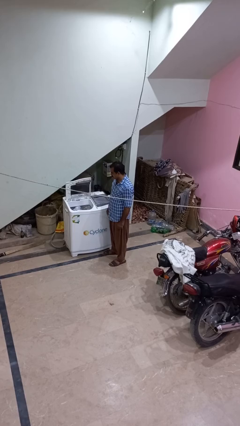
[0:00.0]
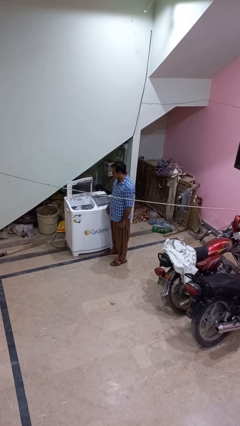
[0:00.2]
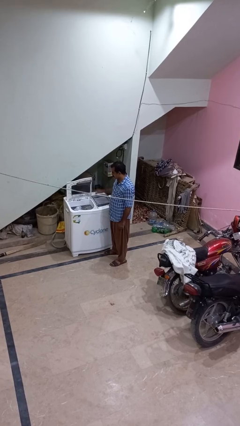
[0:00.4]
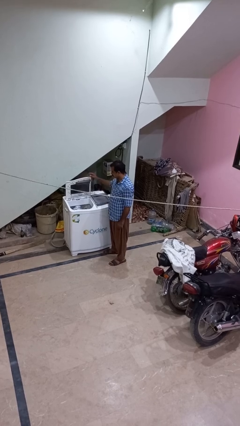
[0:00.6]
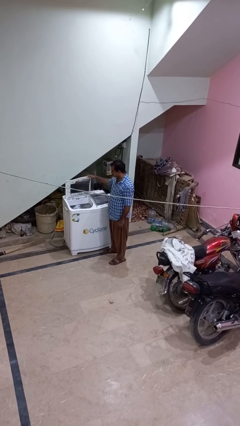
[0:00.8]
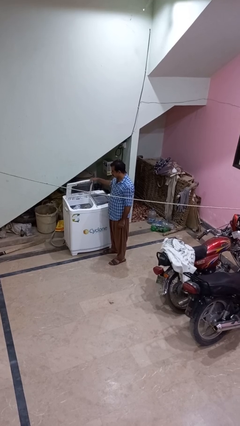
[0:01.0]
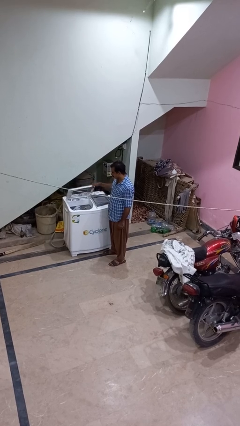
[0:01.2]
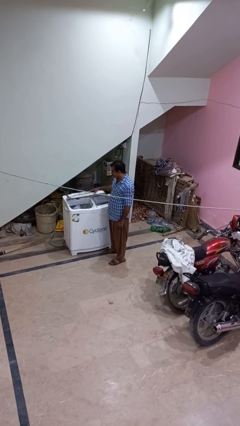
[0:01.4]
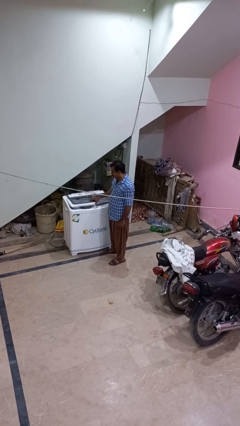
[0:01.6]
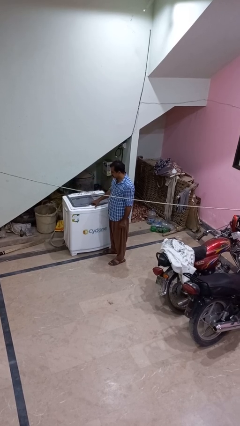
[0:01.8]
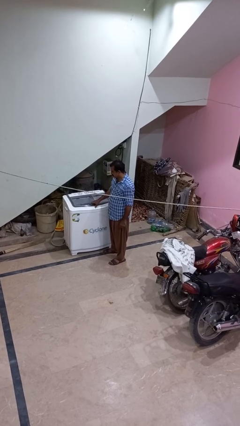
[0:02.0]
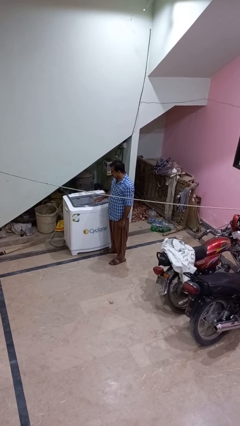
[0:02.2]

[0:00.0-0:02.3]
person closes clothes washer

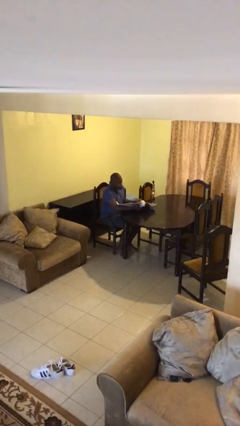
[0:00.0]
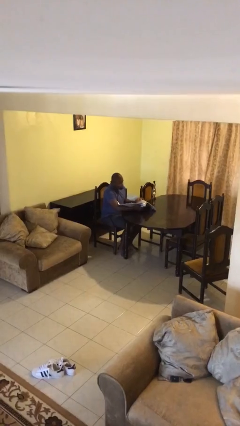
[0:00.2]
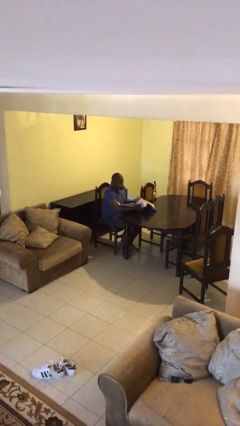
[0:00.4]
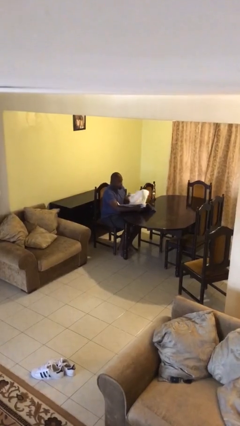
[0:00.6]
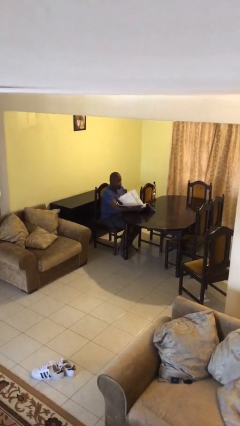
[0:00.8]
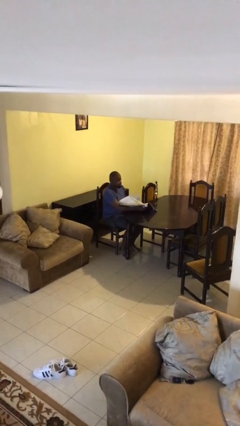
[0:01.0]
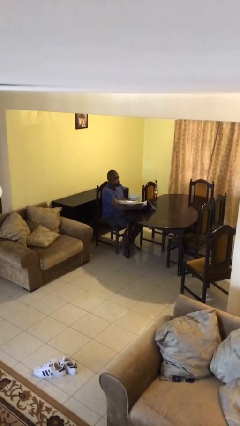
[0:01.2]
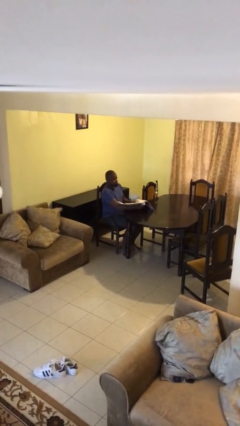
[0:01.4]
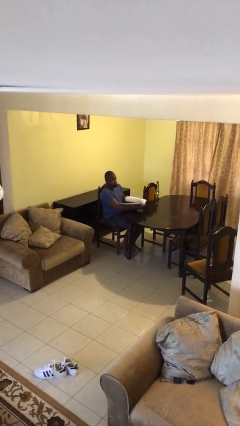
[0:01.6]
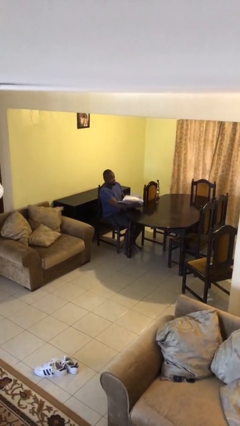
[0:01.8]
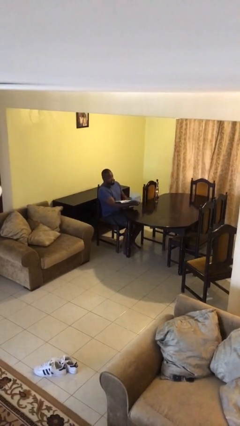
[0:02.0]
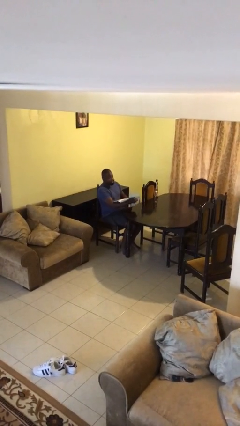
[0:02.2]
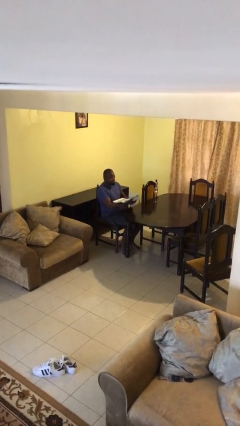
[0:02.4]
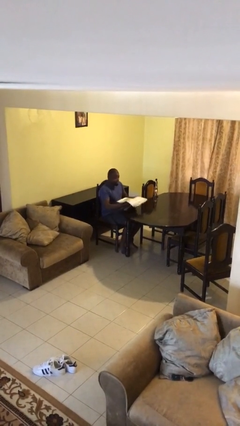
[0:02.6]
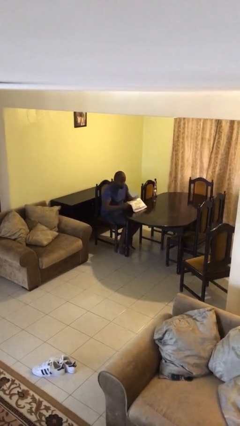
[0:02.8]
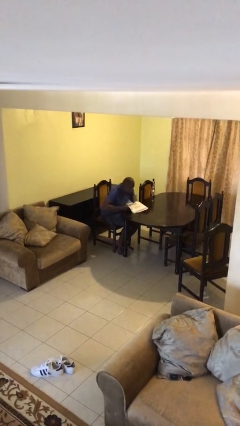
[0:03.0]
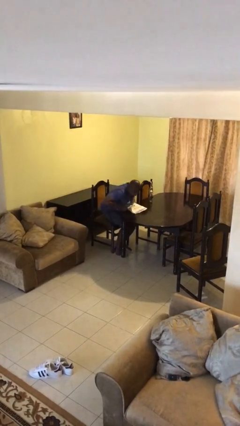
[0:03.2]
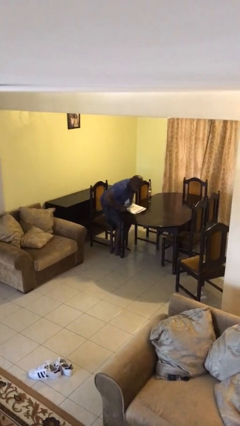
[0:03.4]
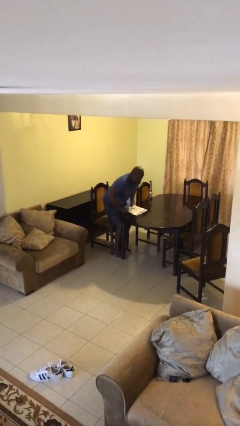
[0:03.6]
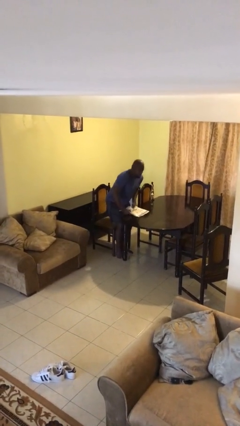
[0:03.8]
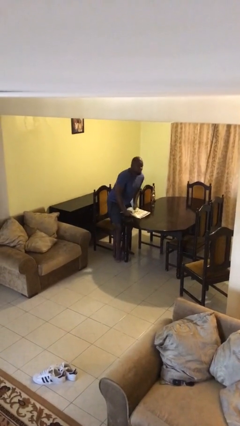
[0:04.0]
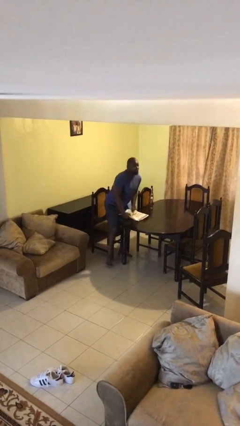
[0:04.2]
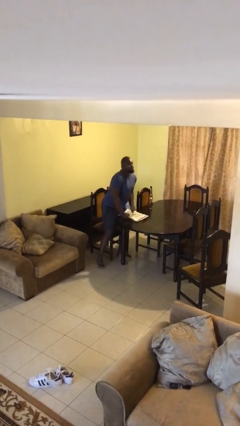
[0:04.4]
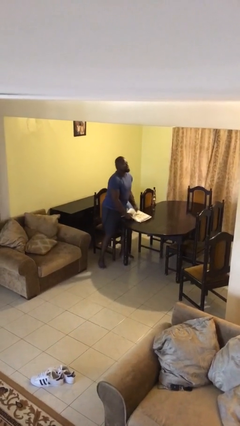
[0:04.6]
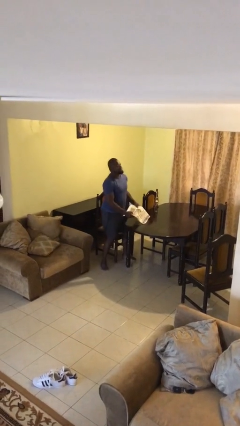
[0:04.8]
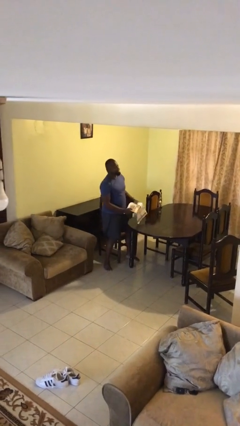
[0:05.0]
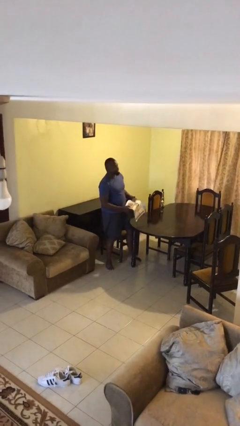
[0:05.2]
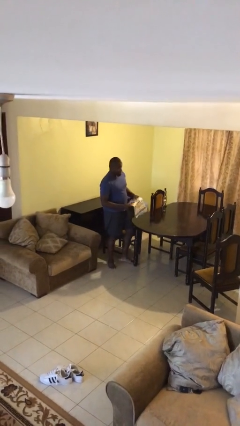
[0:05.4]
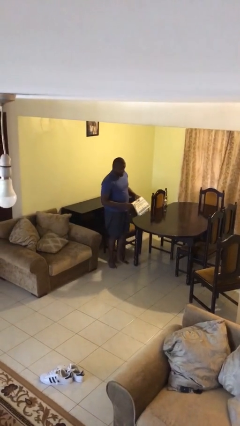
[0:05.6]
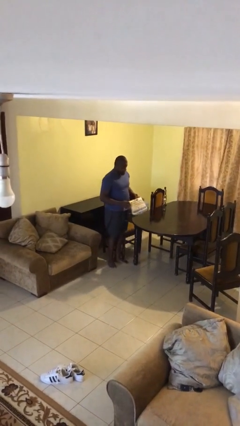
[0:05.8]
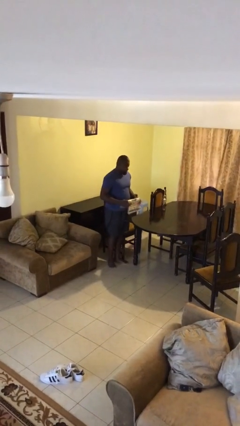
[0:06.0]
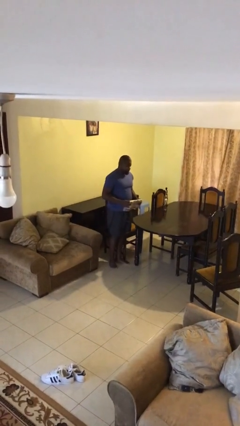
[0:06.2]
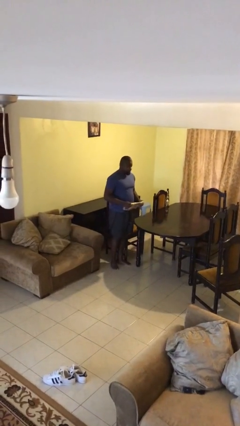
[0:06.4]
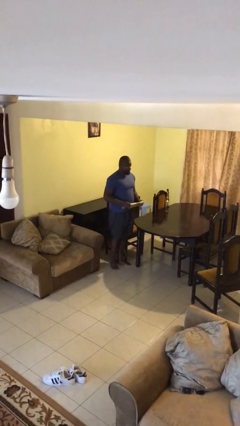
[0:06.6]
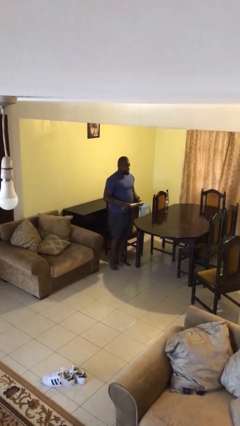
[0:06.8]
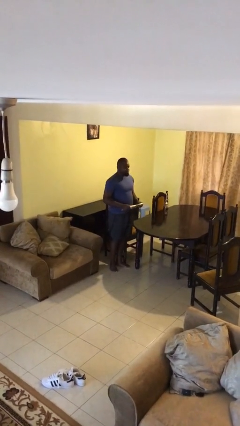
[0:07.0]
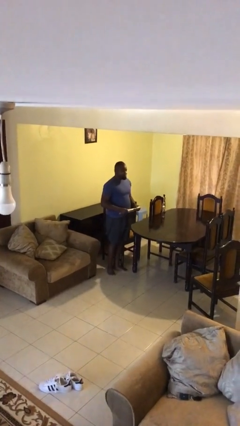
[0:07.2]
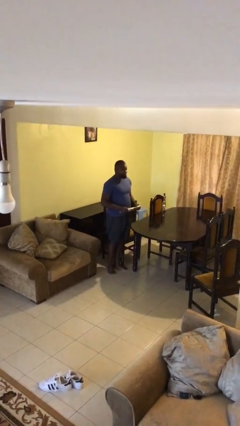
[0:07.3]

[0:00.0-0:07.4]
person stands up

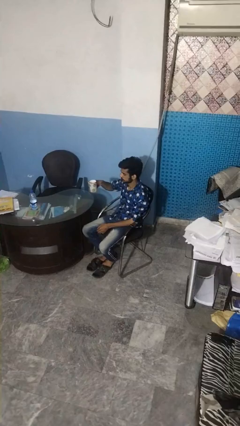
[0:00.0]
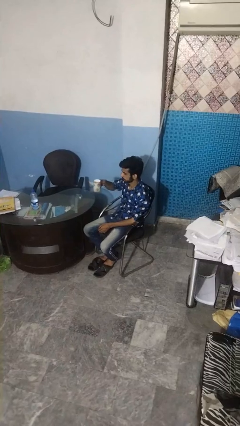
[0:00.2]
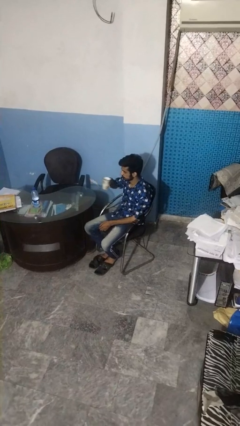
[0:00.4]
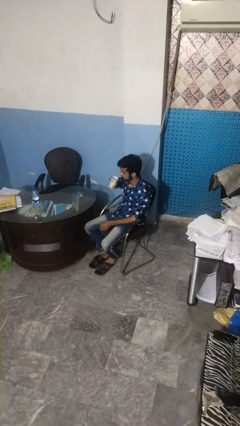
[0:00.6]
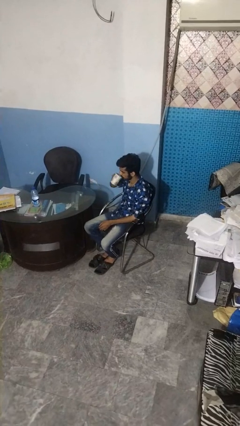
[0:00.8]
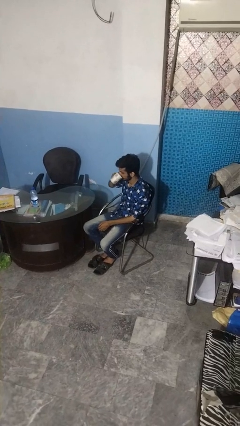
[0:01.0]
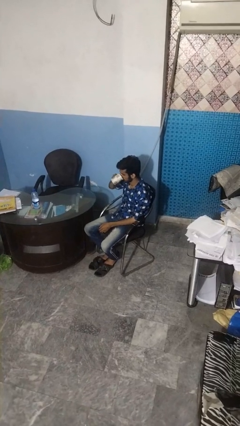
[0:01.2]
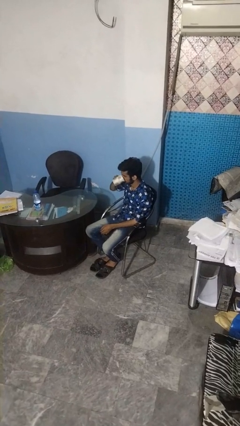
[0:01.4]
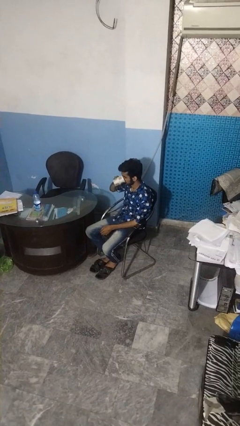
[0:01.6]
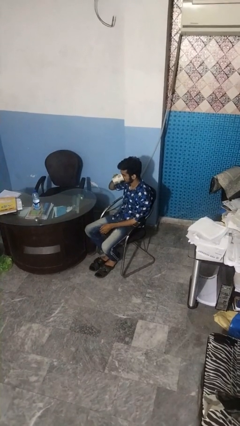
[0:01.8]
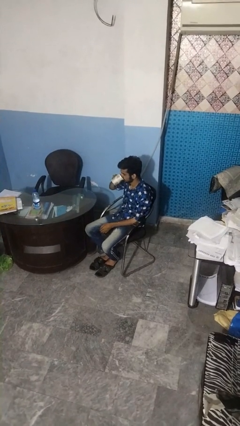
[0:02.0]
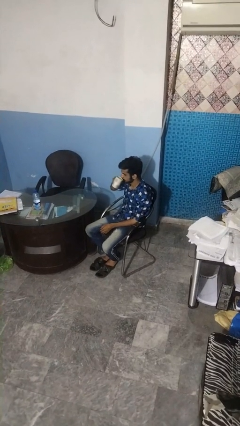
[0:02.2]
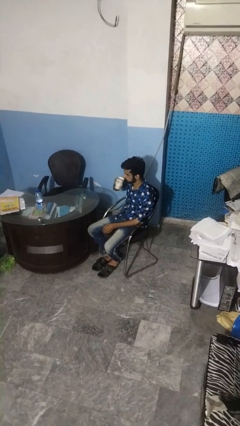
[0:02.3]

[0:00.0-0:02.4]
person drinks from mug

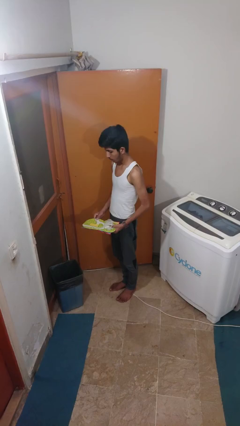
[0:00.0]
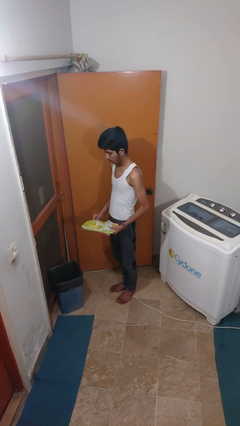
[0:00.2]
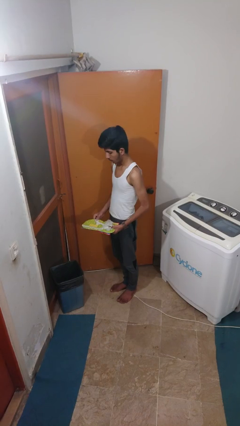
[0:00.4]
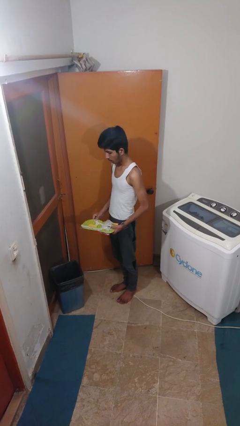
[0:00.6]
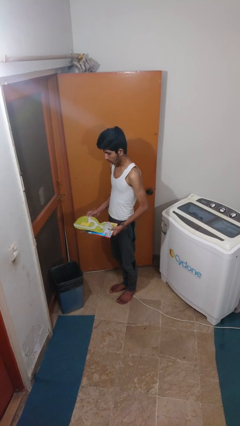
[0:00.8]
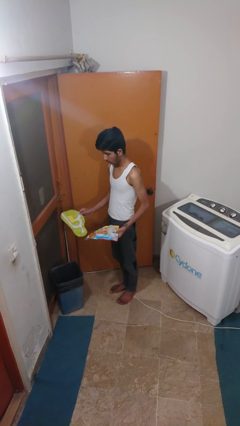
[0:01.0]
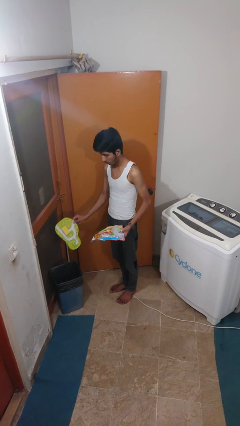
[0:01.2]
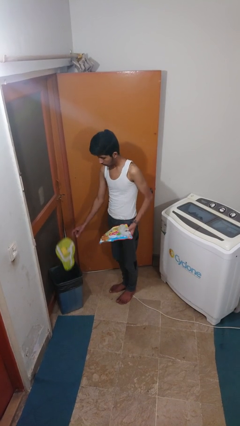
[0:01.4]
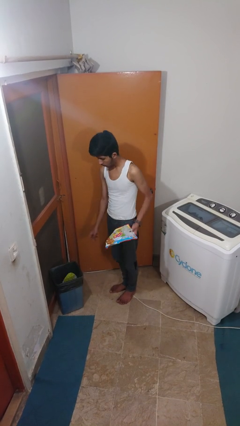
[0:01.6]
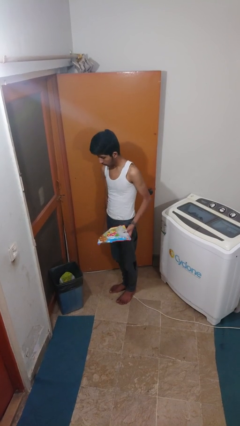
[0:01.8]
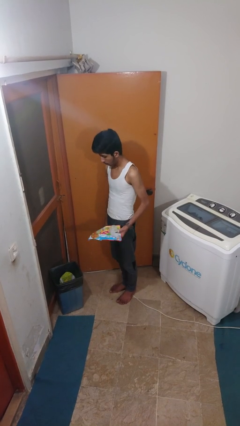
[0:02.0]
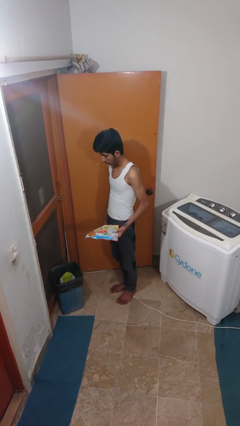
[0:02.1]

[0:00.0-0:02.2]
person discards trash

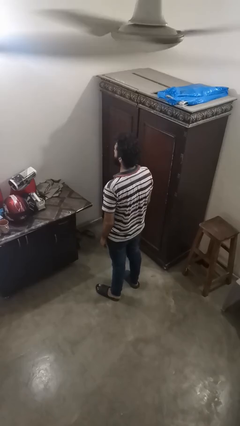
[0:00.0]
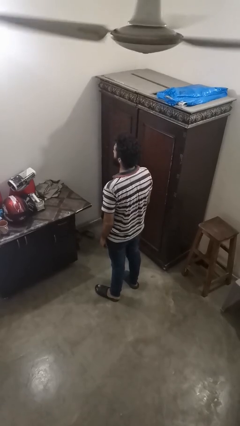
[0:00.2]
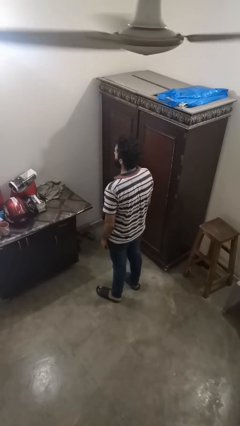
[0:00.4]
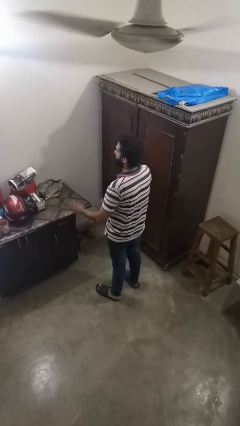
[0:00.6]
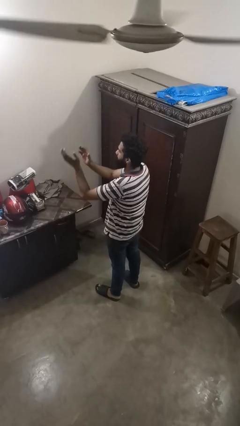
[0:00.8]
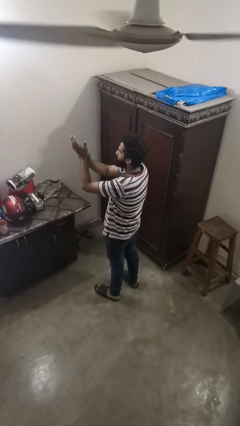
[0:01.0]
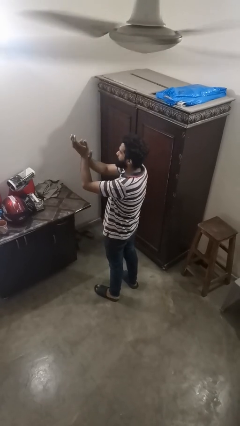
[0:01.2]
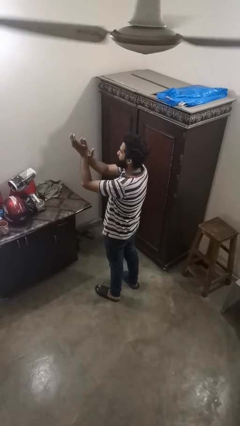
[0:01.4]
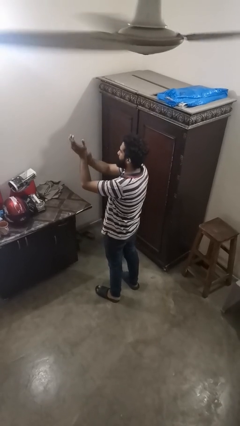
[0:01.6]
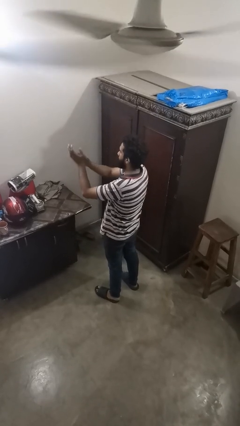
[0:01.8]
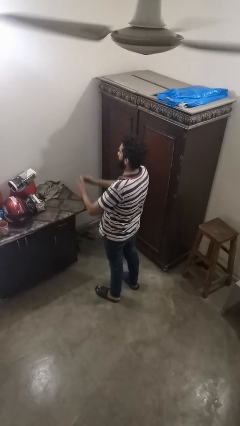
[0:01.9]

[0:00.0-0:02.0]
person claps hands

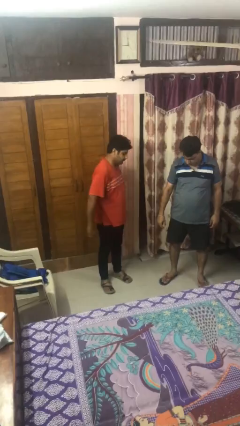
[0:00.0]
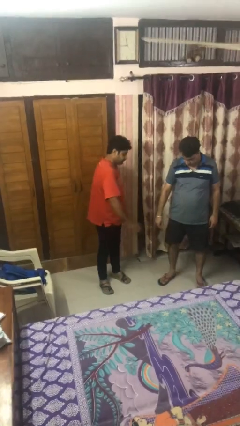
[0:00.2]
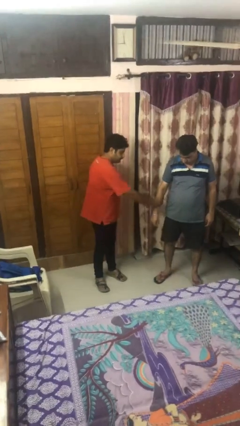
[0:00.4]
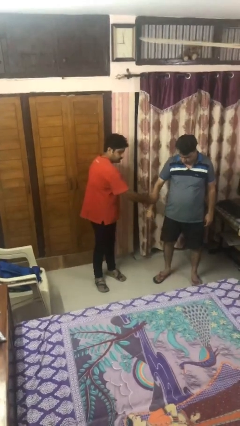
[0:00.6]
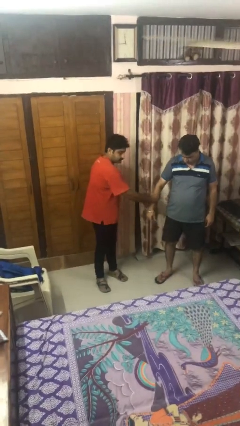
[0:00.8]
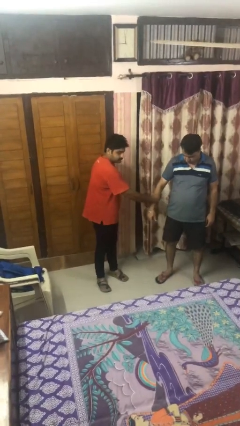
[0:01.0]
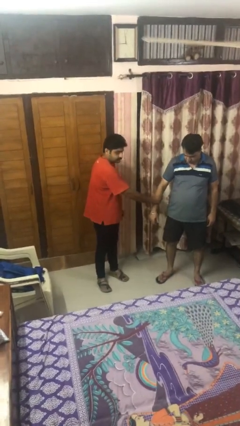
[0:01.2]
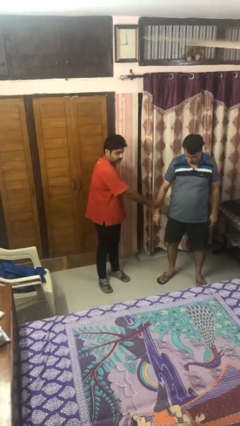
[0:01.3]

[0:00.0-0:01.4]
person grabs person by forearm
